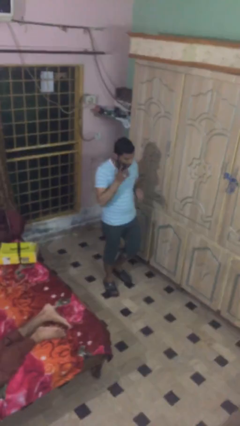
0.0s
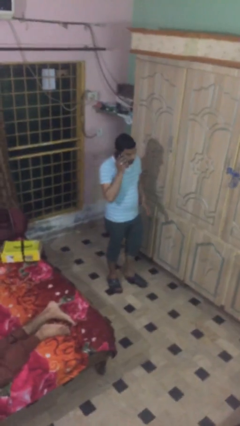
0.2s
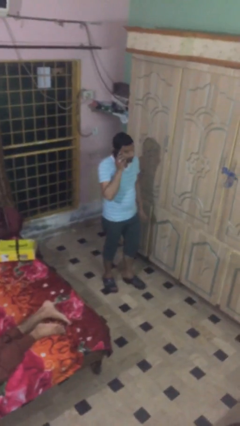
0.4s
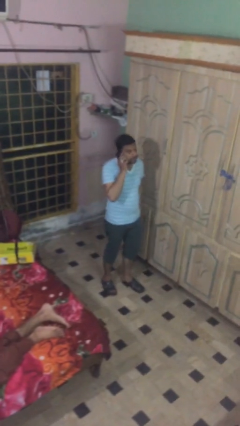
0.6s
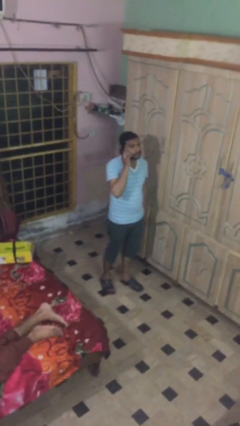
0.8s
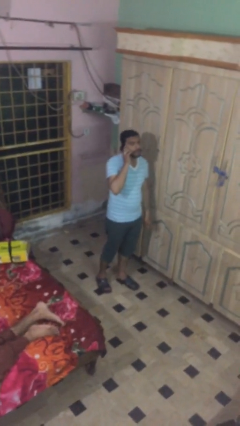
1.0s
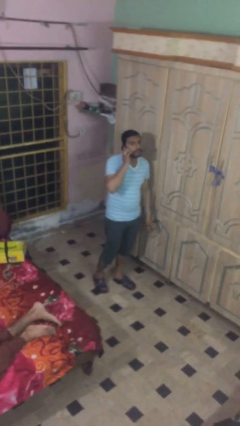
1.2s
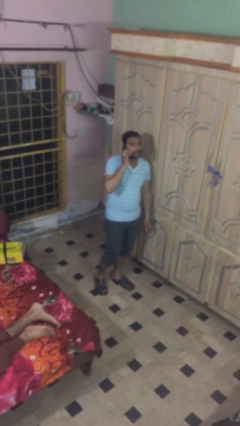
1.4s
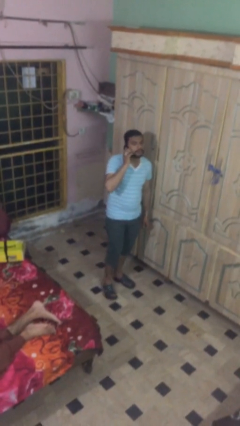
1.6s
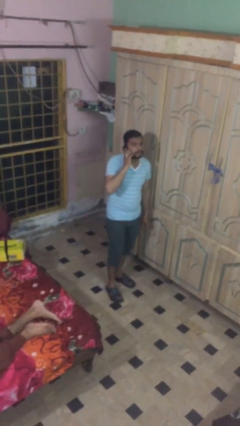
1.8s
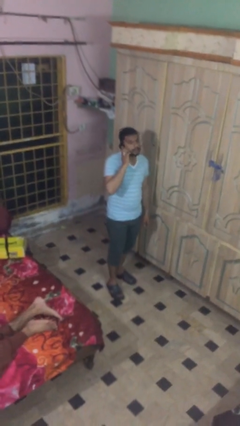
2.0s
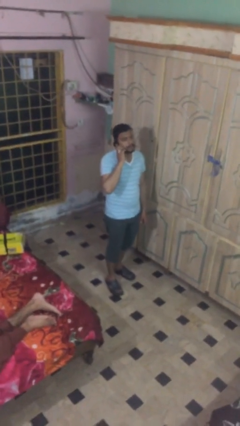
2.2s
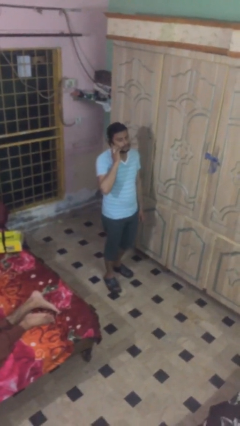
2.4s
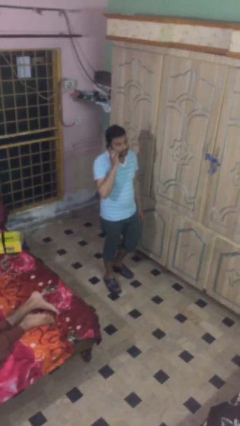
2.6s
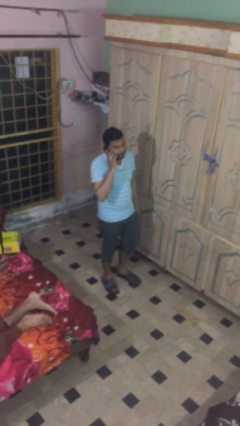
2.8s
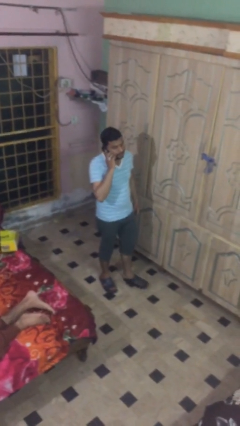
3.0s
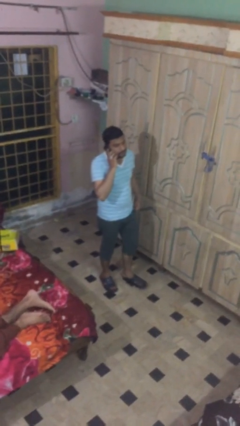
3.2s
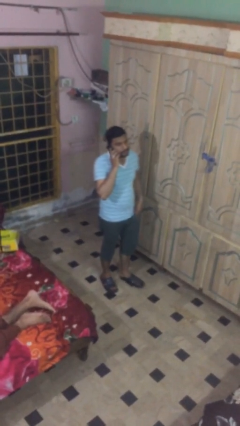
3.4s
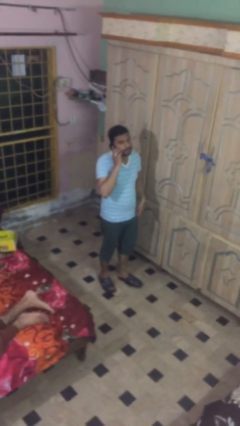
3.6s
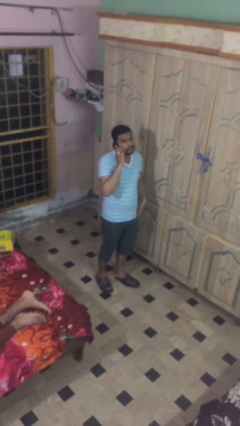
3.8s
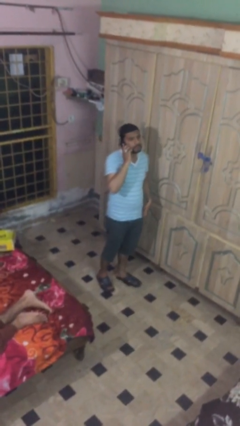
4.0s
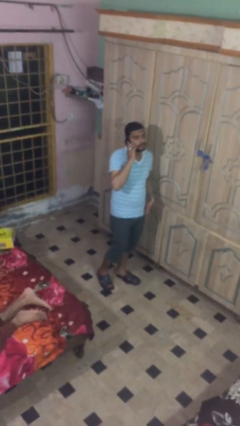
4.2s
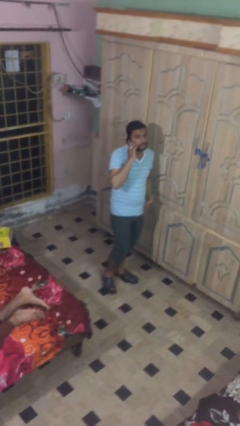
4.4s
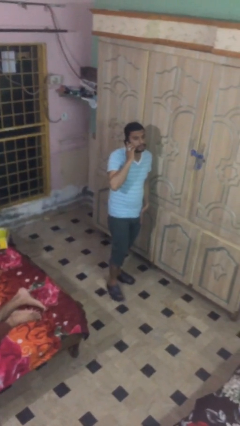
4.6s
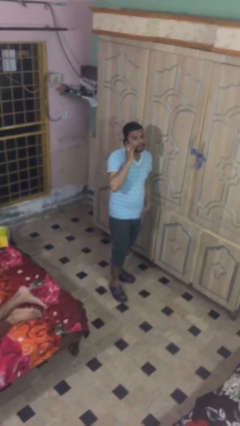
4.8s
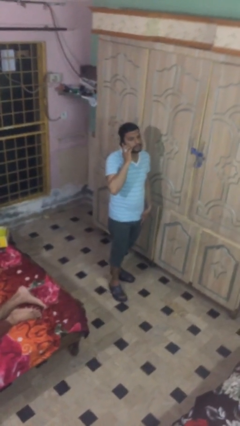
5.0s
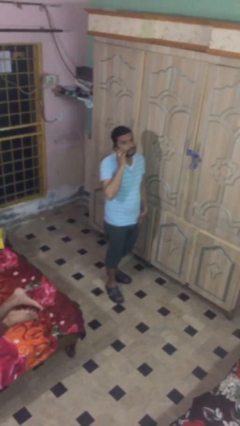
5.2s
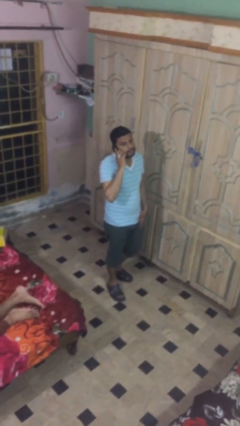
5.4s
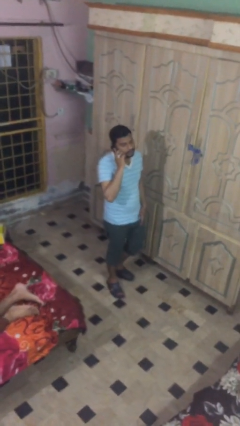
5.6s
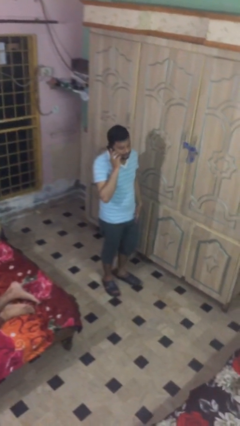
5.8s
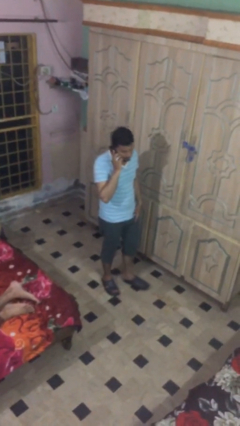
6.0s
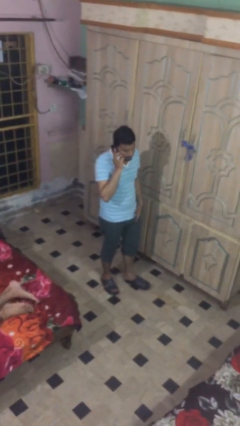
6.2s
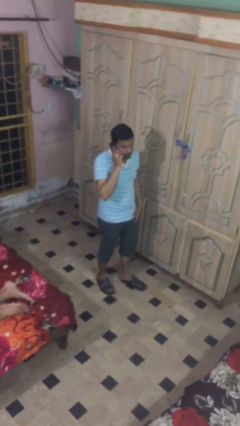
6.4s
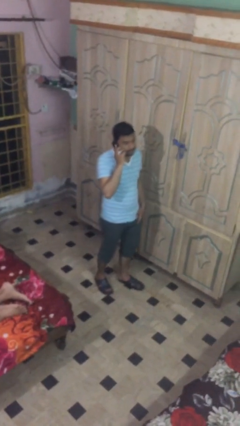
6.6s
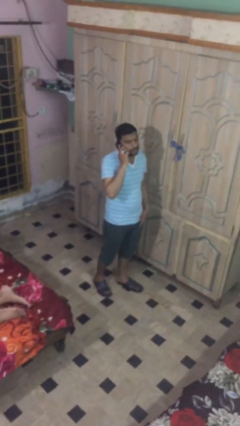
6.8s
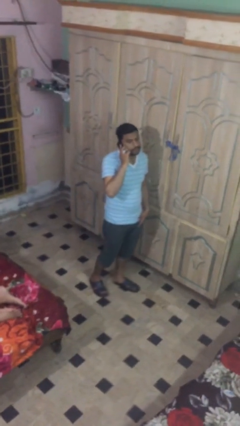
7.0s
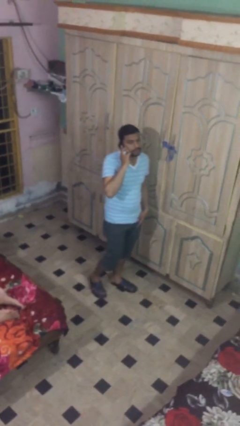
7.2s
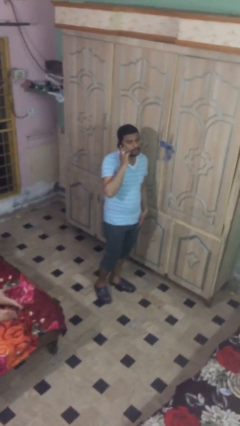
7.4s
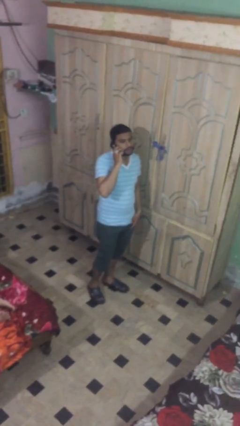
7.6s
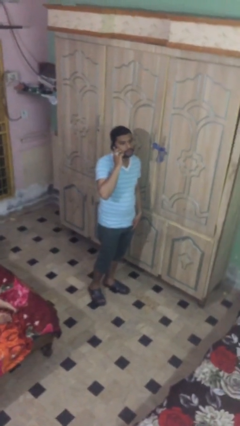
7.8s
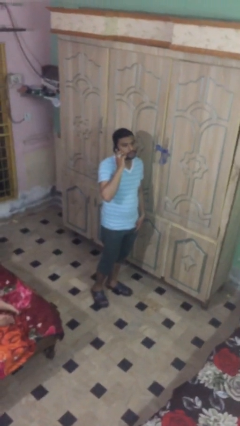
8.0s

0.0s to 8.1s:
person talks on phone

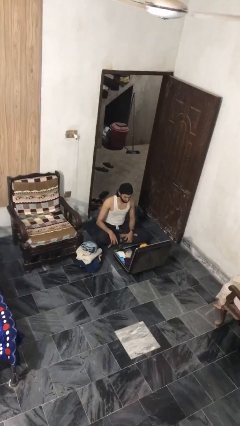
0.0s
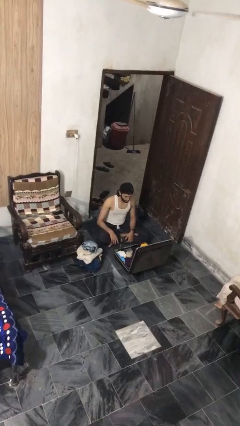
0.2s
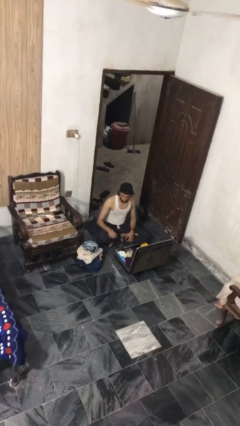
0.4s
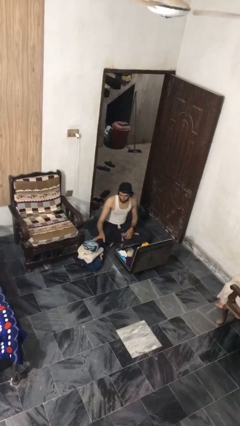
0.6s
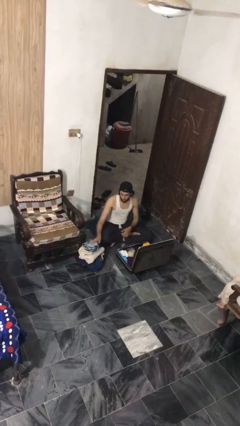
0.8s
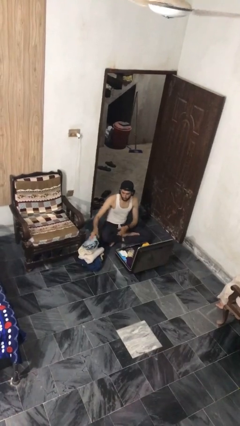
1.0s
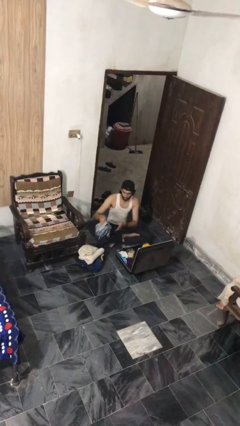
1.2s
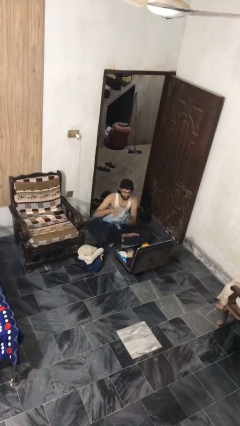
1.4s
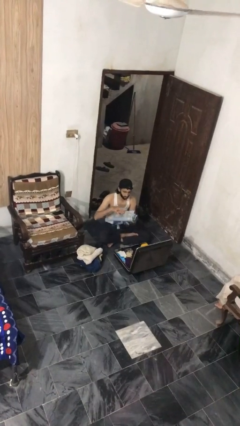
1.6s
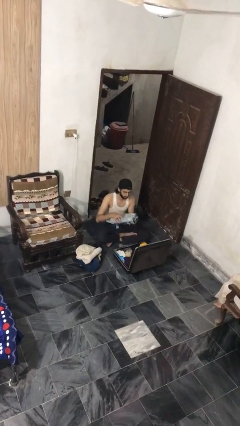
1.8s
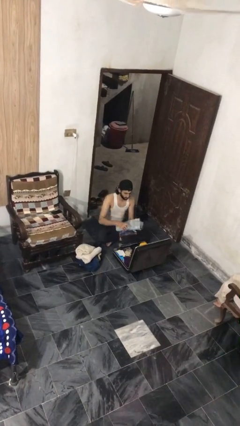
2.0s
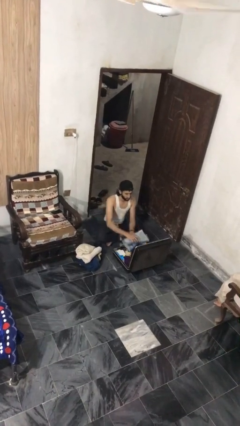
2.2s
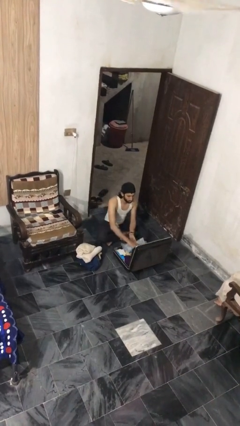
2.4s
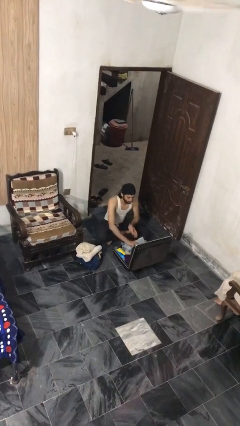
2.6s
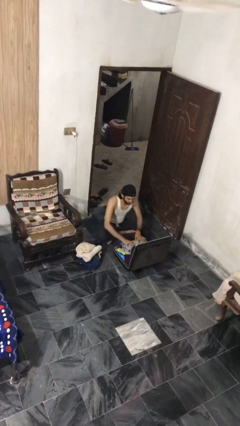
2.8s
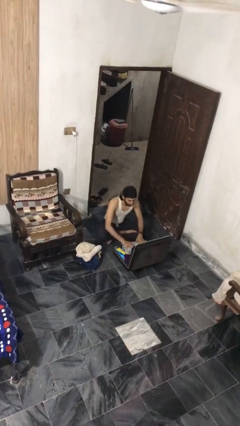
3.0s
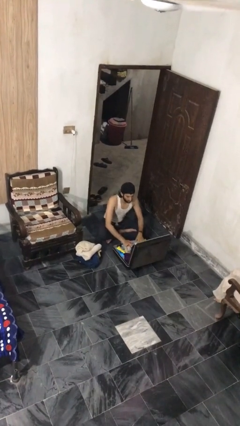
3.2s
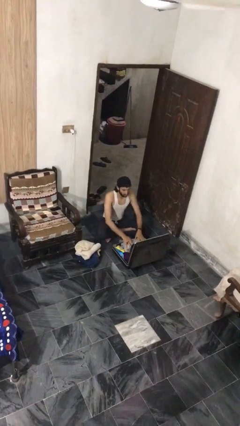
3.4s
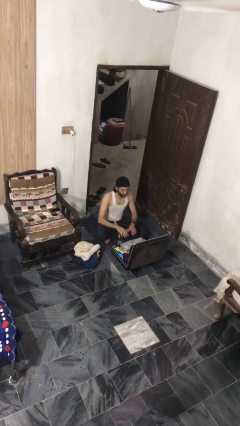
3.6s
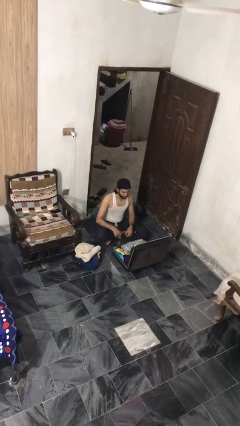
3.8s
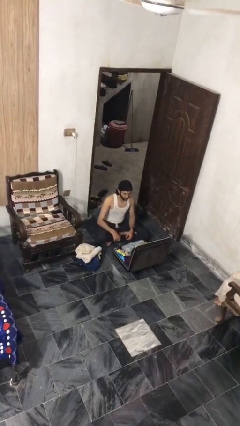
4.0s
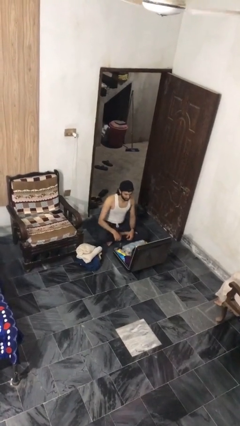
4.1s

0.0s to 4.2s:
person loads clothes into suitcase

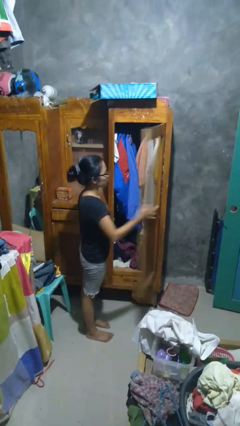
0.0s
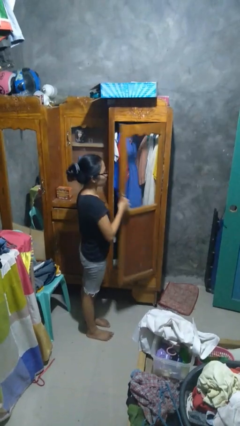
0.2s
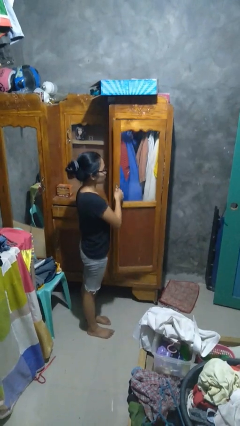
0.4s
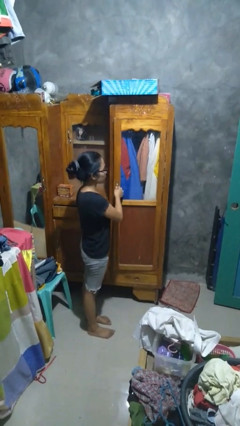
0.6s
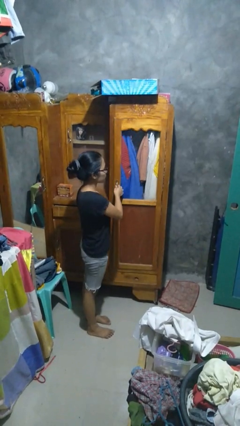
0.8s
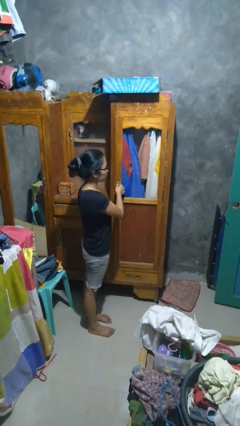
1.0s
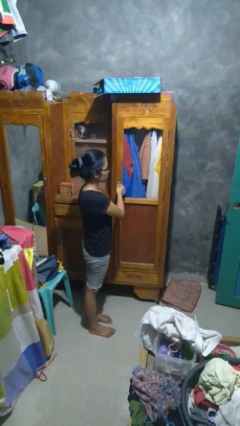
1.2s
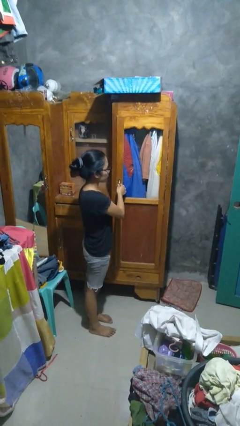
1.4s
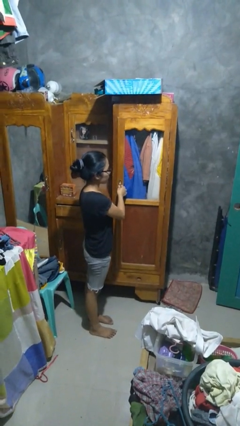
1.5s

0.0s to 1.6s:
person closes closet door

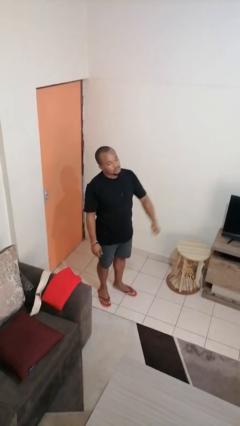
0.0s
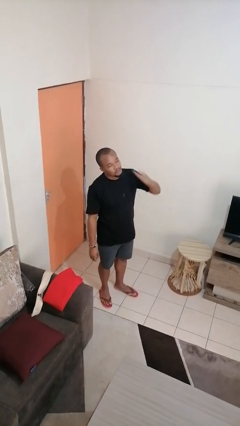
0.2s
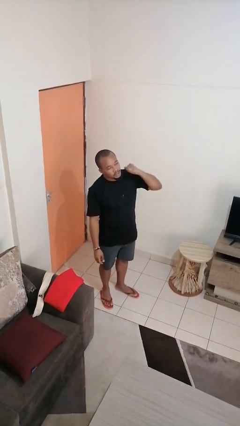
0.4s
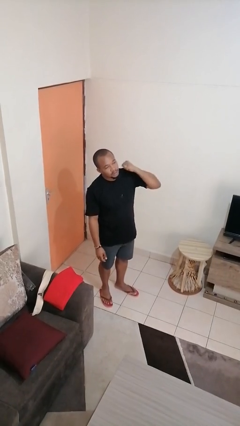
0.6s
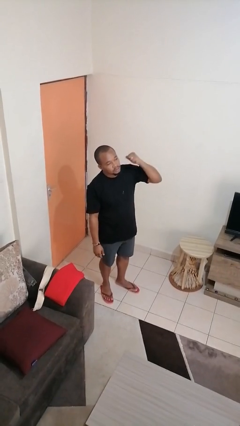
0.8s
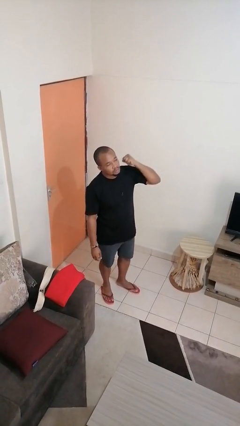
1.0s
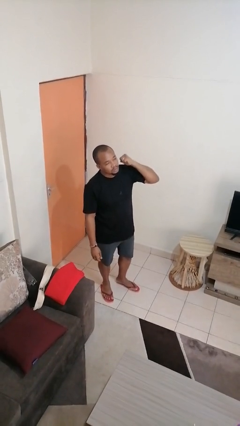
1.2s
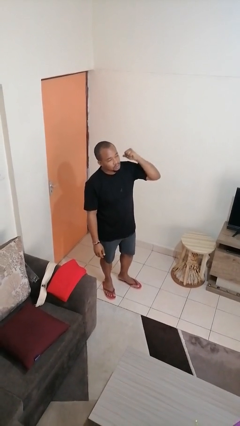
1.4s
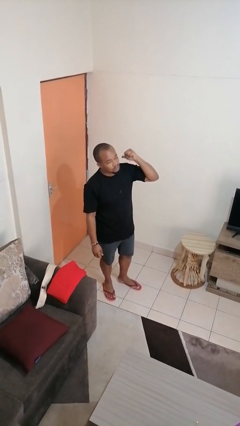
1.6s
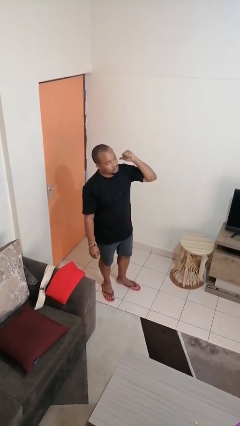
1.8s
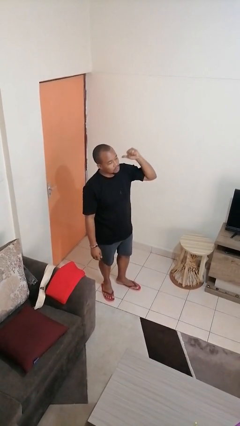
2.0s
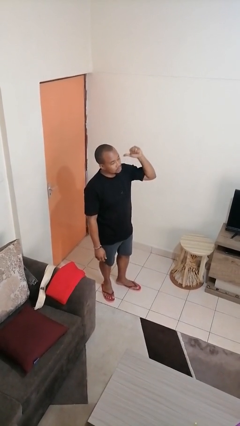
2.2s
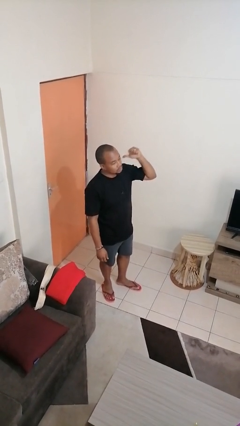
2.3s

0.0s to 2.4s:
person gestures behind me

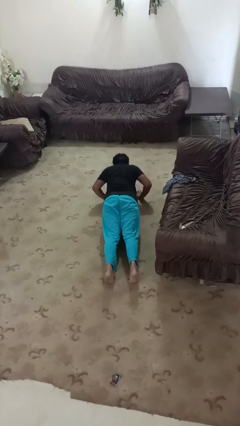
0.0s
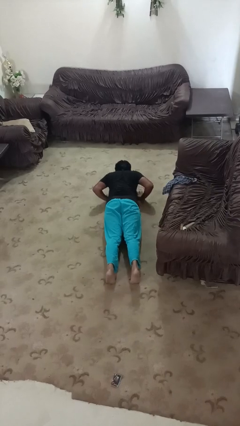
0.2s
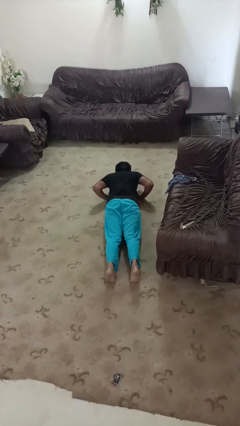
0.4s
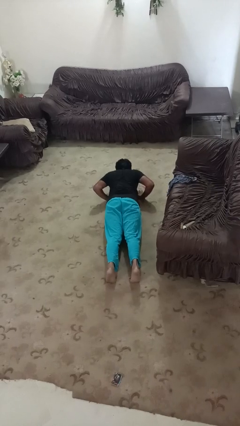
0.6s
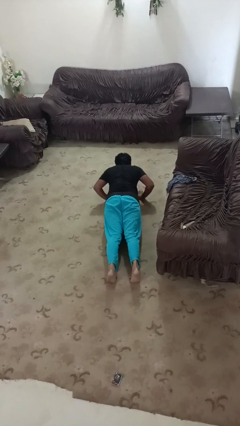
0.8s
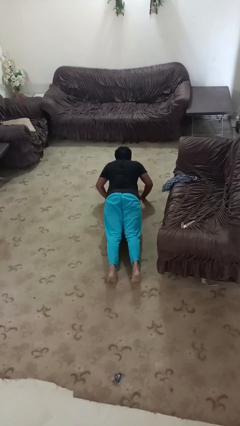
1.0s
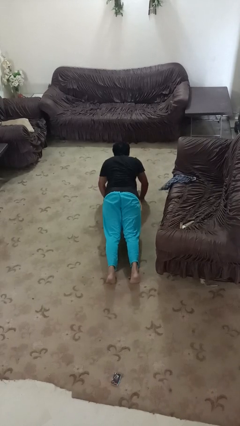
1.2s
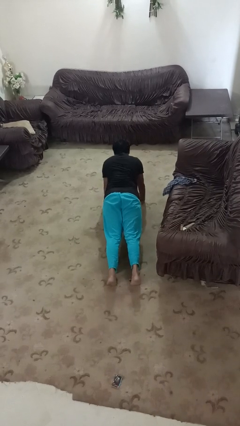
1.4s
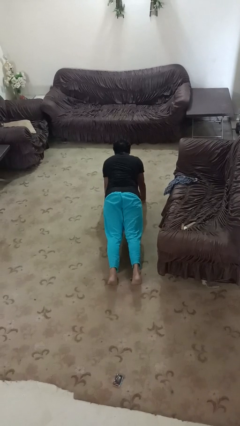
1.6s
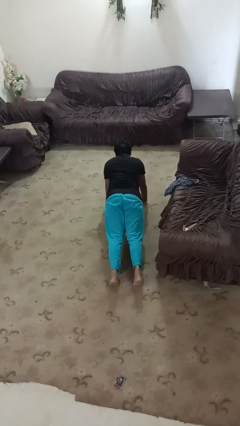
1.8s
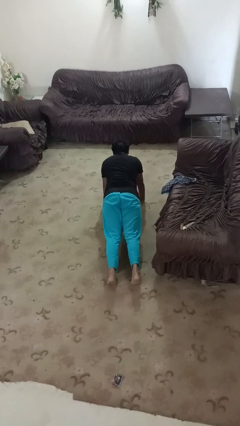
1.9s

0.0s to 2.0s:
person exercises with pushup
